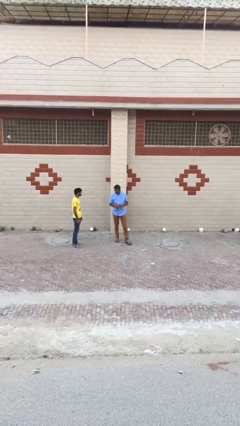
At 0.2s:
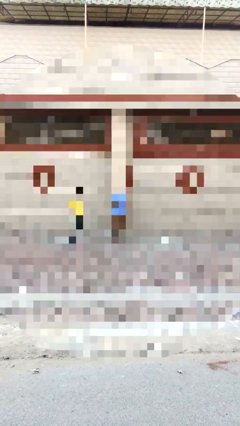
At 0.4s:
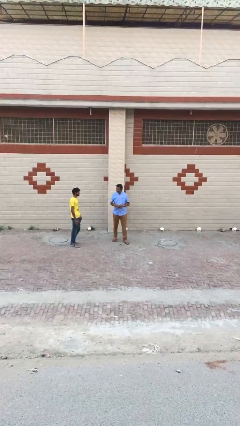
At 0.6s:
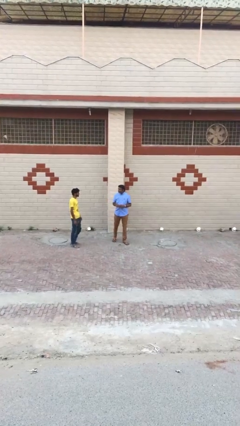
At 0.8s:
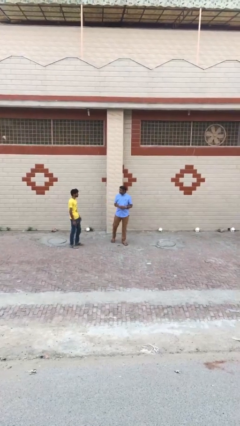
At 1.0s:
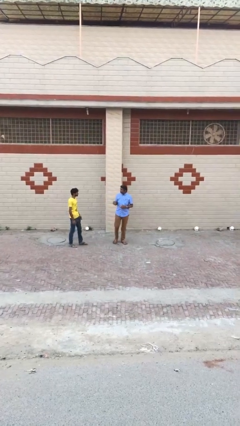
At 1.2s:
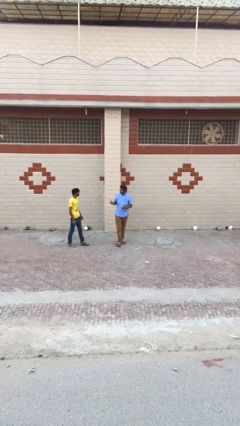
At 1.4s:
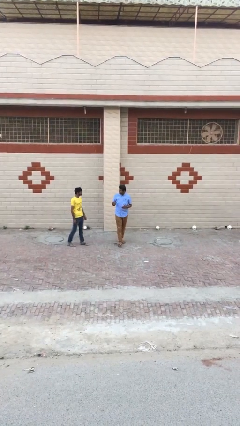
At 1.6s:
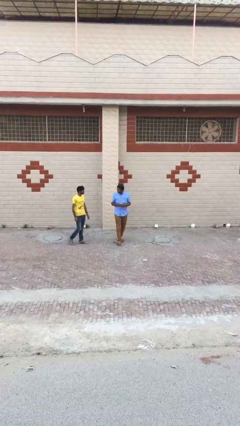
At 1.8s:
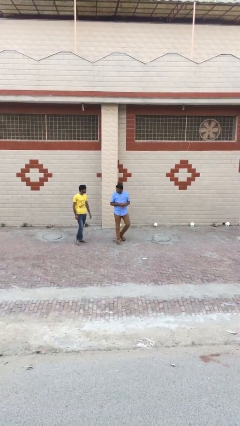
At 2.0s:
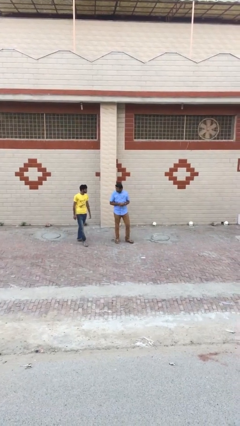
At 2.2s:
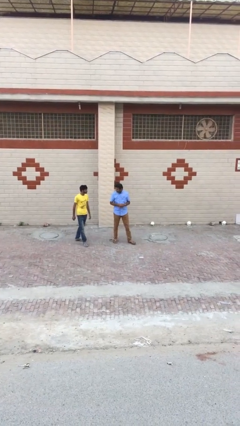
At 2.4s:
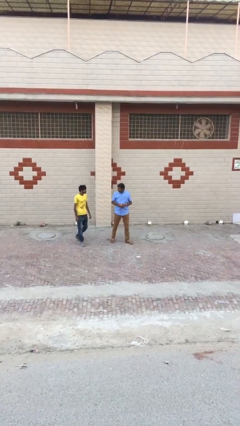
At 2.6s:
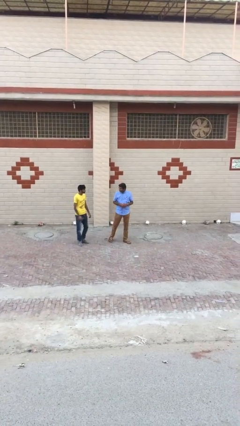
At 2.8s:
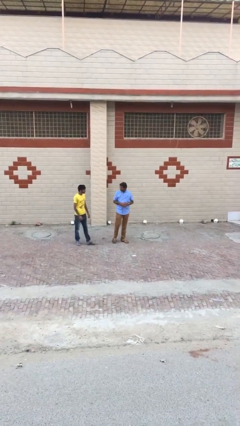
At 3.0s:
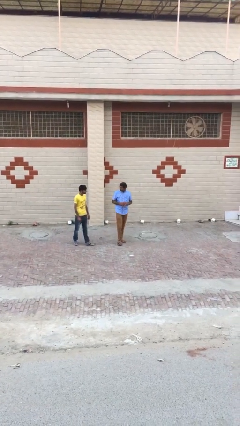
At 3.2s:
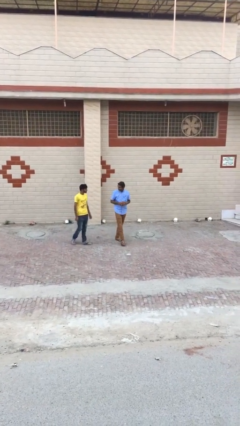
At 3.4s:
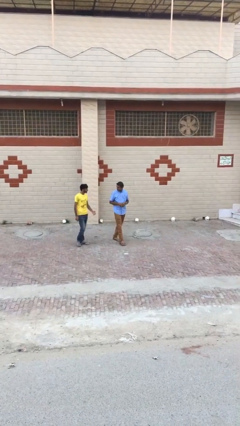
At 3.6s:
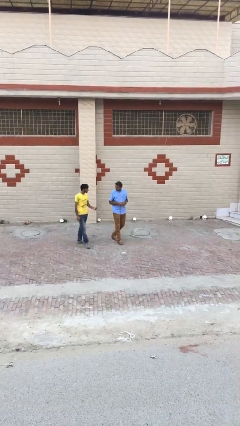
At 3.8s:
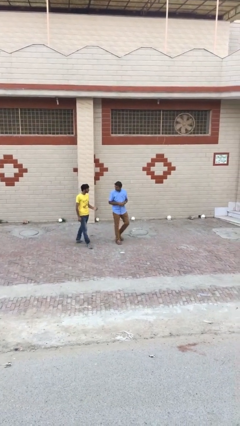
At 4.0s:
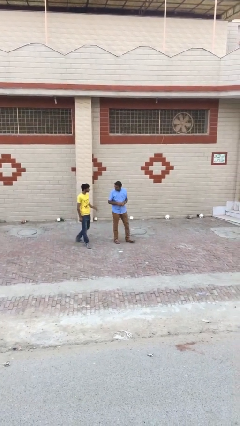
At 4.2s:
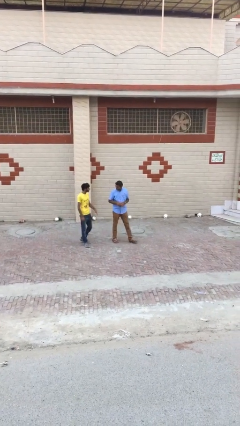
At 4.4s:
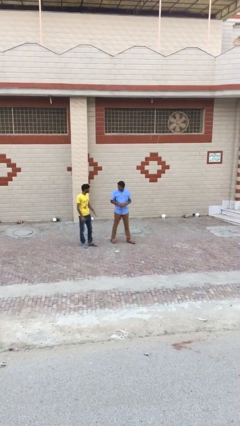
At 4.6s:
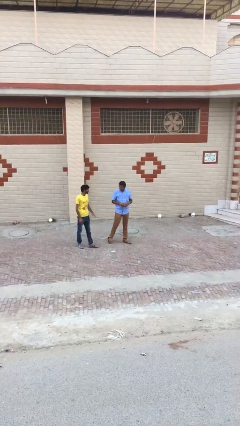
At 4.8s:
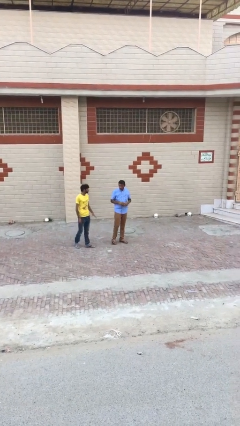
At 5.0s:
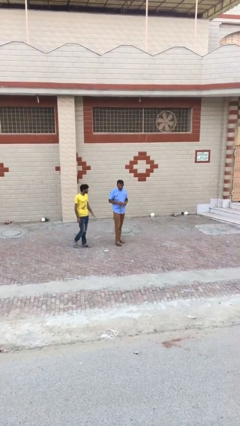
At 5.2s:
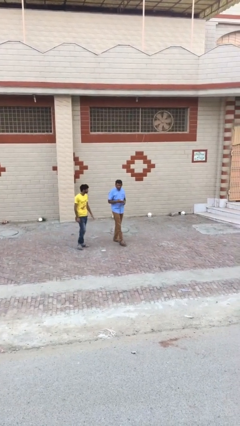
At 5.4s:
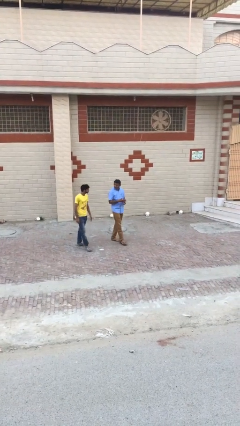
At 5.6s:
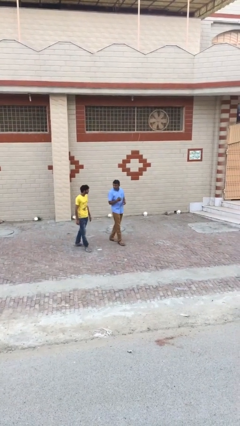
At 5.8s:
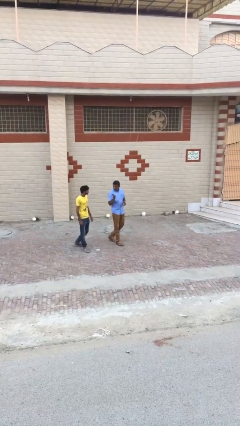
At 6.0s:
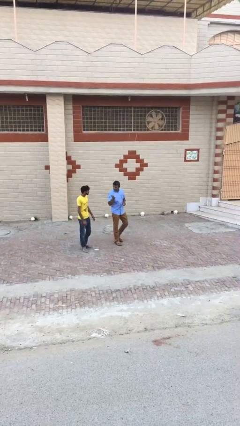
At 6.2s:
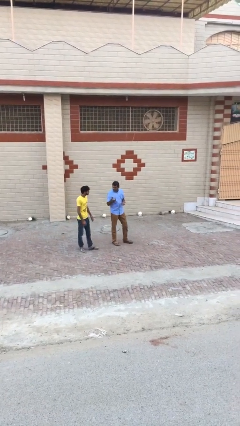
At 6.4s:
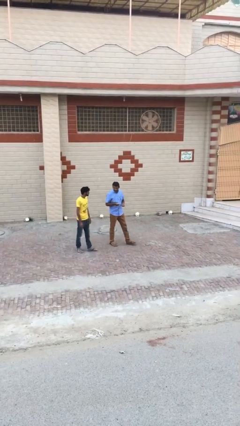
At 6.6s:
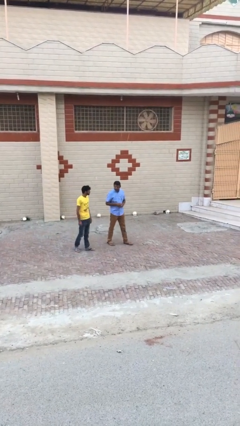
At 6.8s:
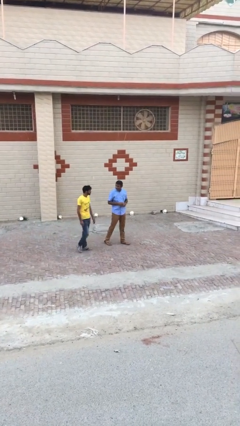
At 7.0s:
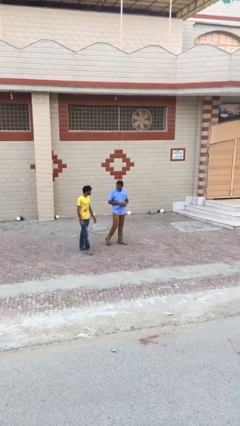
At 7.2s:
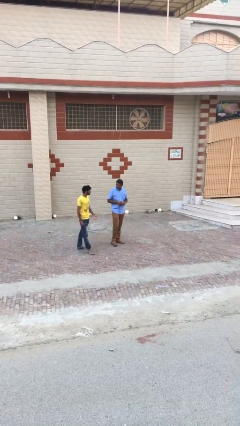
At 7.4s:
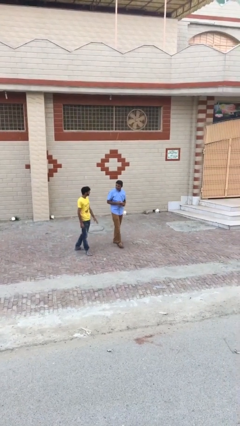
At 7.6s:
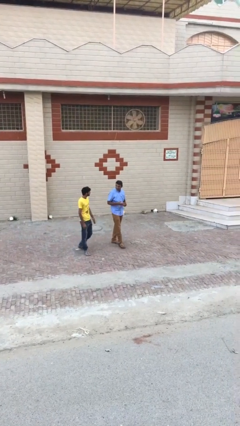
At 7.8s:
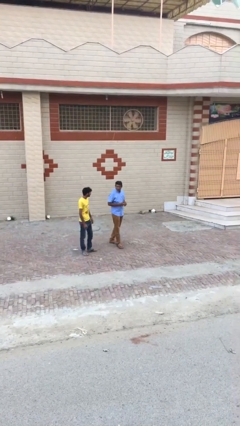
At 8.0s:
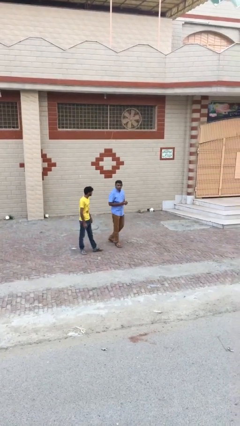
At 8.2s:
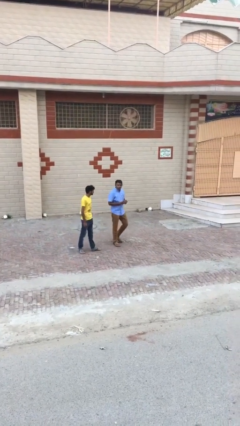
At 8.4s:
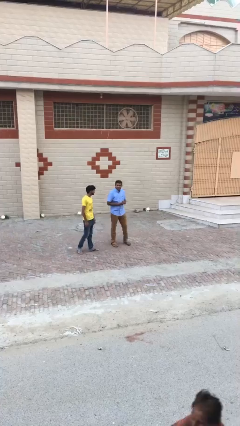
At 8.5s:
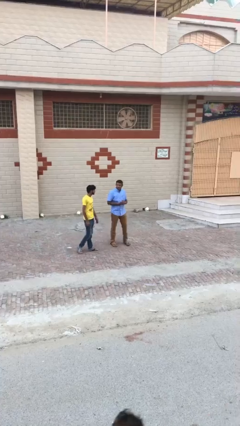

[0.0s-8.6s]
person talks to person

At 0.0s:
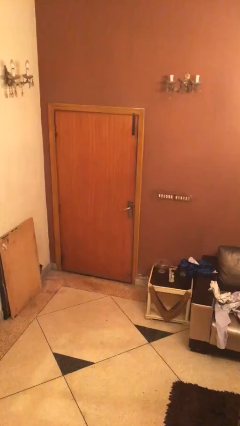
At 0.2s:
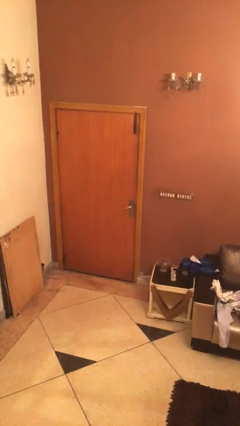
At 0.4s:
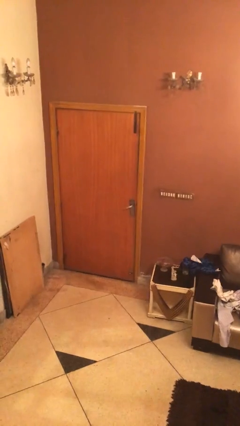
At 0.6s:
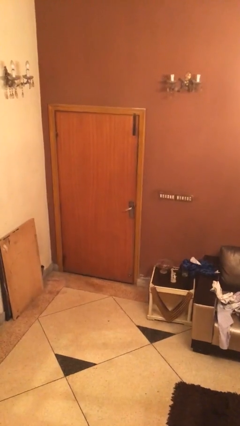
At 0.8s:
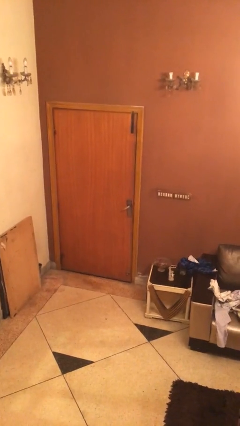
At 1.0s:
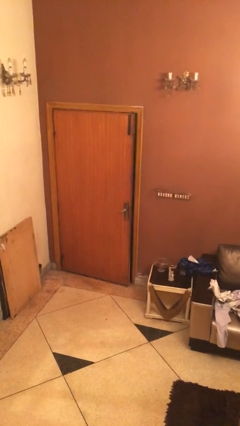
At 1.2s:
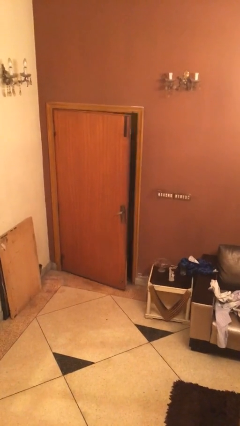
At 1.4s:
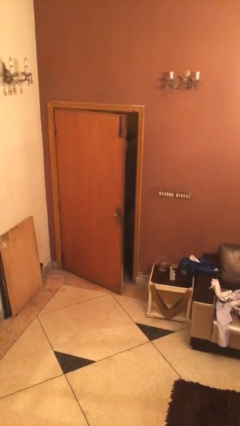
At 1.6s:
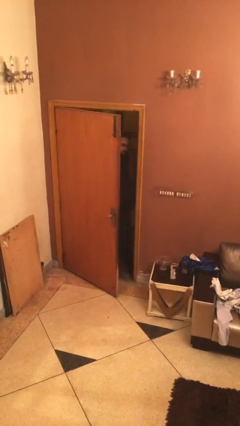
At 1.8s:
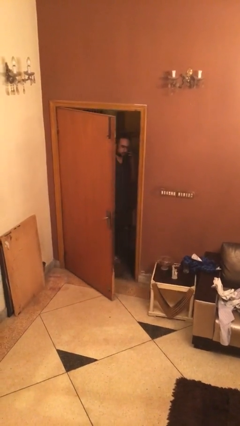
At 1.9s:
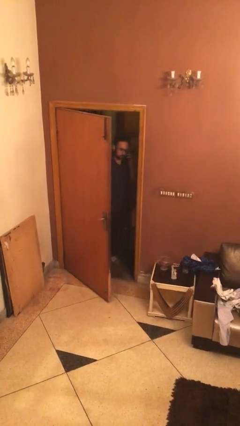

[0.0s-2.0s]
person opens facility door

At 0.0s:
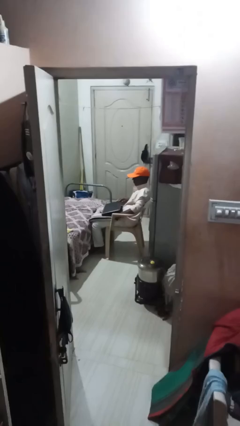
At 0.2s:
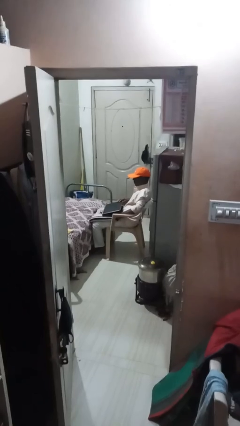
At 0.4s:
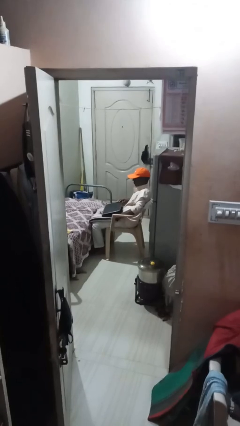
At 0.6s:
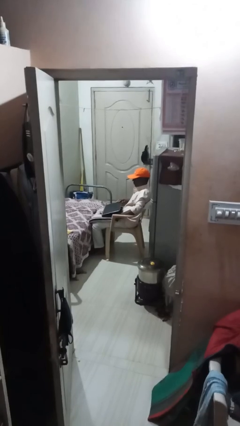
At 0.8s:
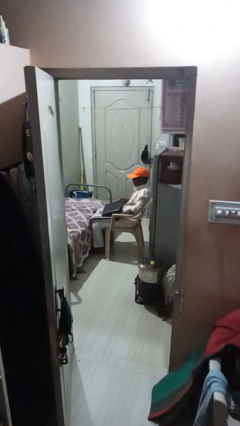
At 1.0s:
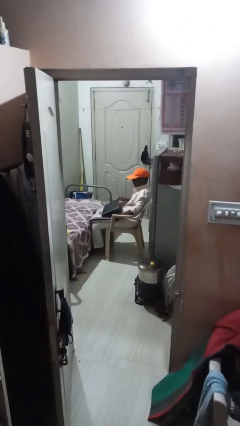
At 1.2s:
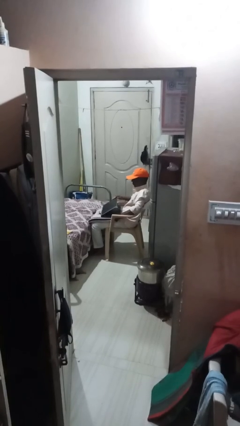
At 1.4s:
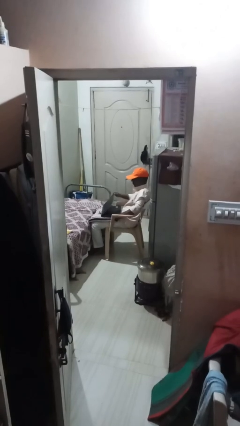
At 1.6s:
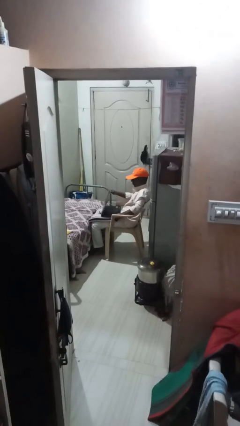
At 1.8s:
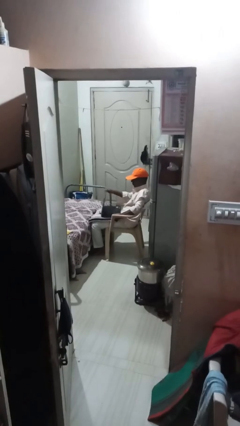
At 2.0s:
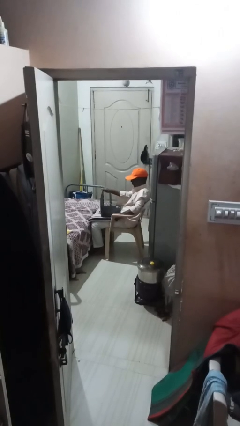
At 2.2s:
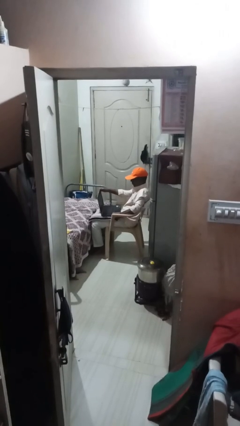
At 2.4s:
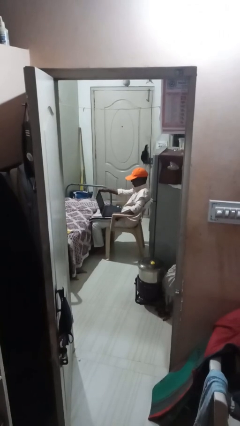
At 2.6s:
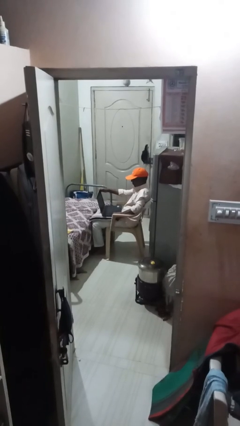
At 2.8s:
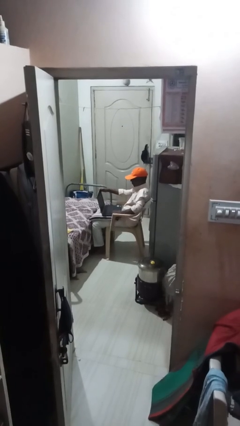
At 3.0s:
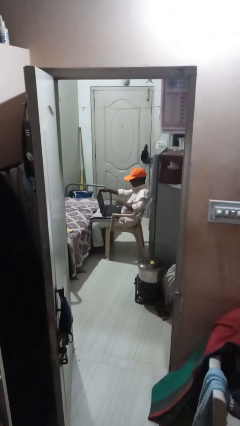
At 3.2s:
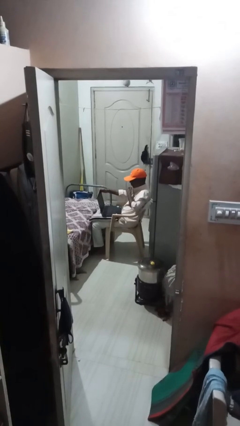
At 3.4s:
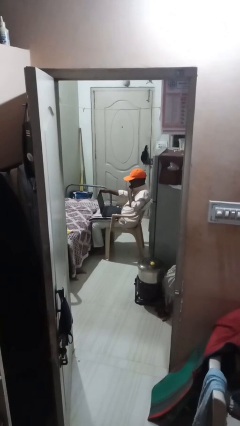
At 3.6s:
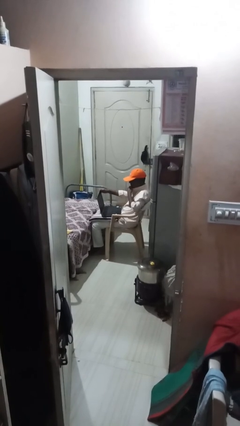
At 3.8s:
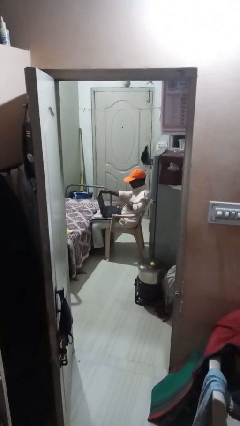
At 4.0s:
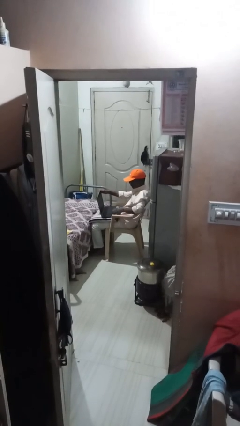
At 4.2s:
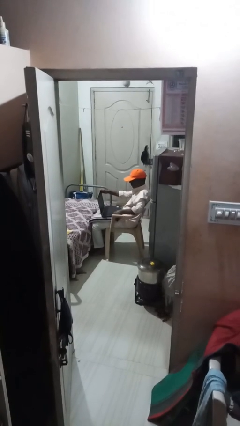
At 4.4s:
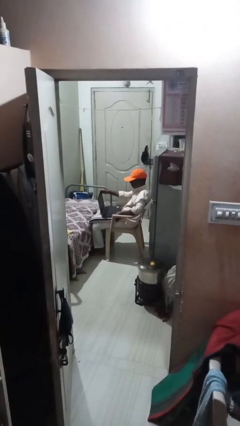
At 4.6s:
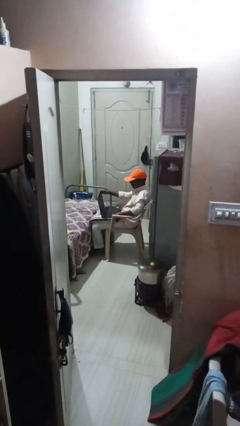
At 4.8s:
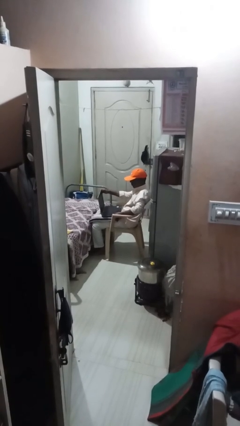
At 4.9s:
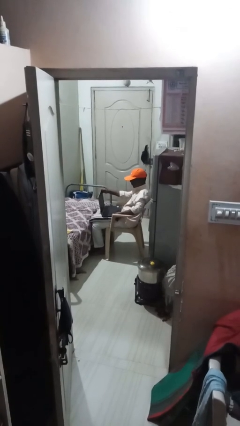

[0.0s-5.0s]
person interacts with laptop

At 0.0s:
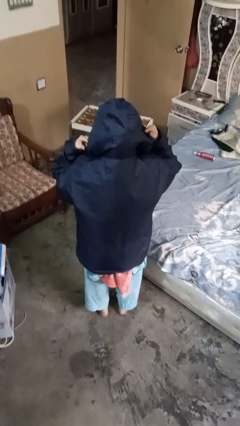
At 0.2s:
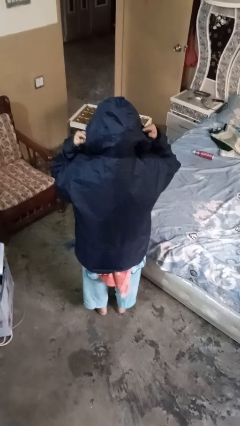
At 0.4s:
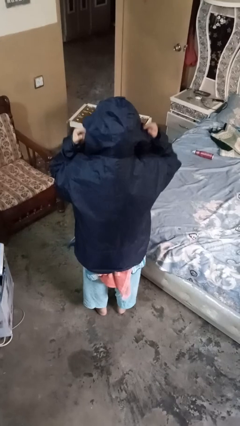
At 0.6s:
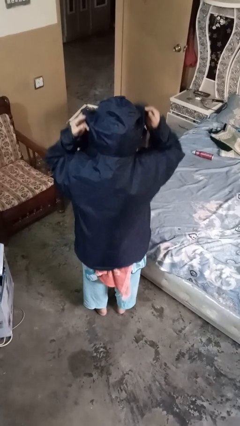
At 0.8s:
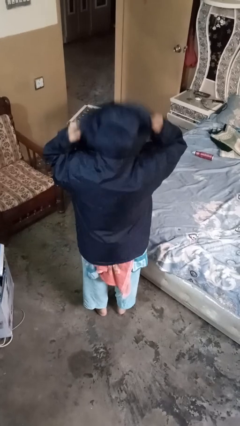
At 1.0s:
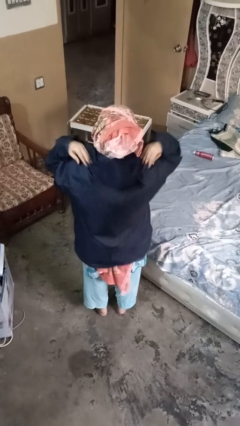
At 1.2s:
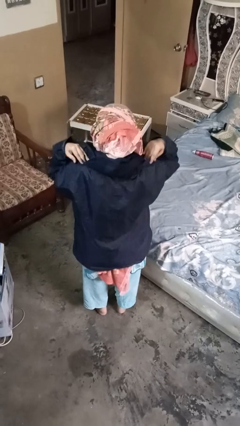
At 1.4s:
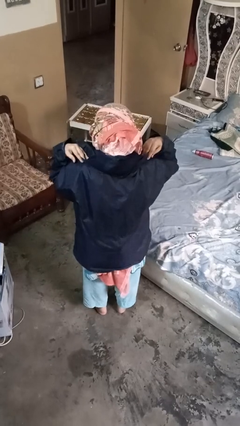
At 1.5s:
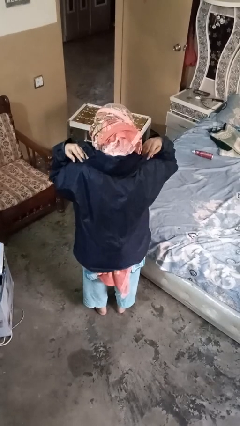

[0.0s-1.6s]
person takes off hoodie

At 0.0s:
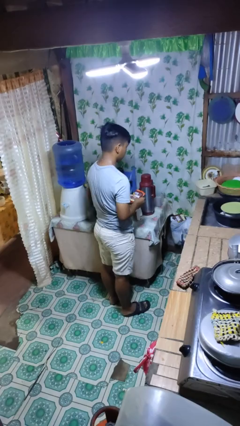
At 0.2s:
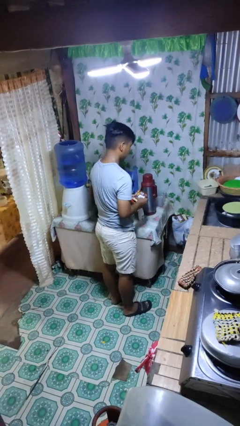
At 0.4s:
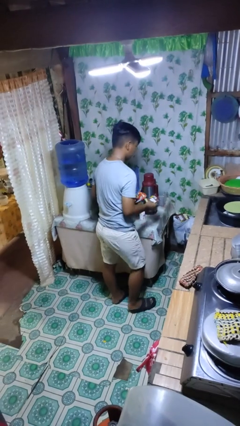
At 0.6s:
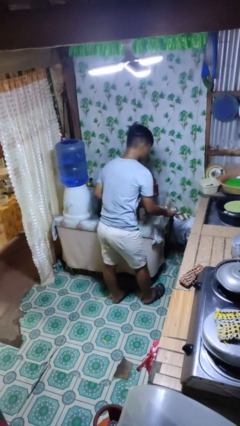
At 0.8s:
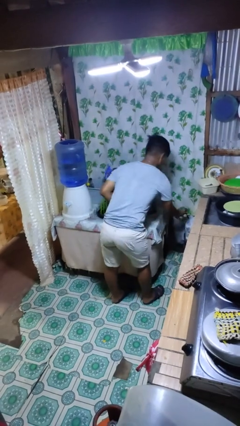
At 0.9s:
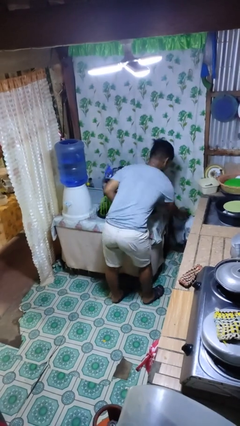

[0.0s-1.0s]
person discards trash
